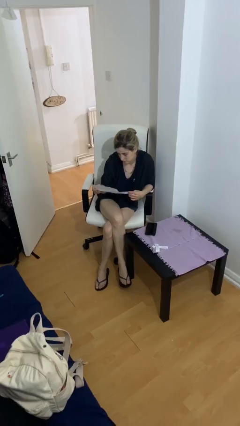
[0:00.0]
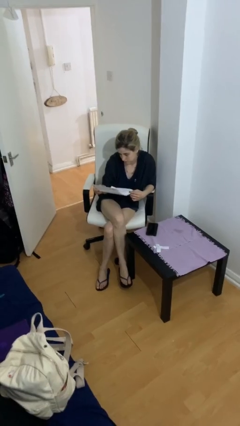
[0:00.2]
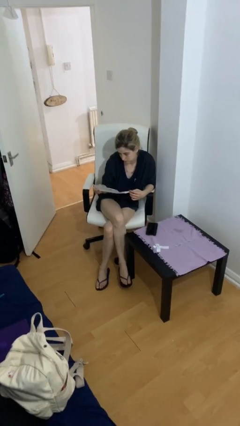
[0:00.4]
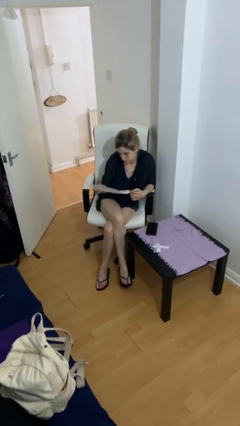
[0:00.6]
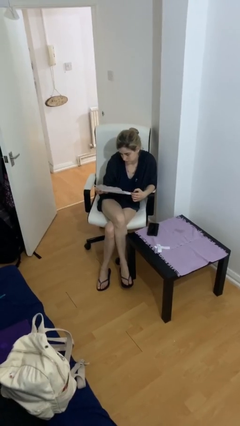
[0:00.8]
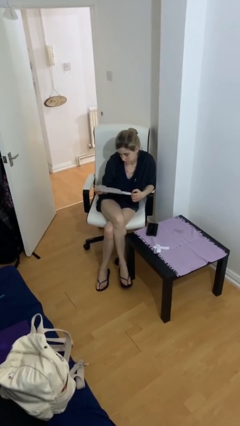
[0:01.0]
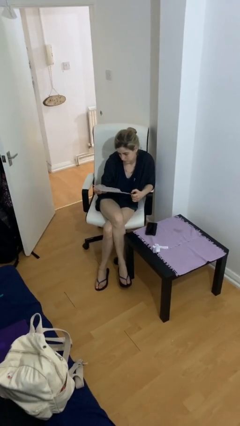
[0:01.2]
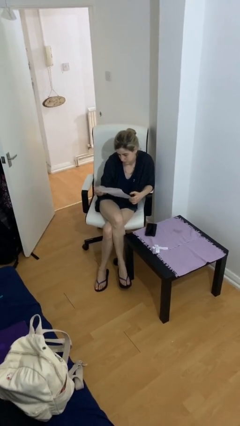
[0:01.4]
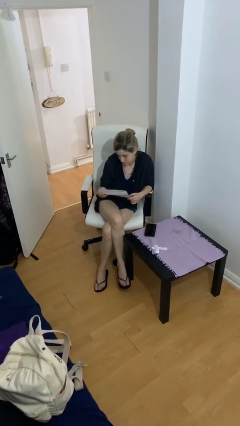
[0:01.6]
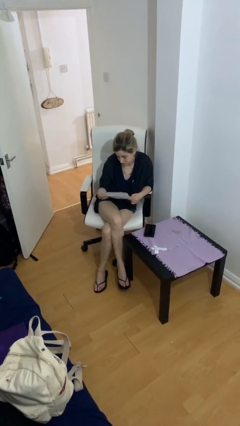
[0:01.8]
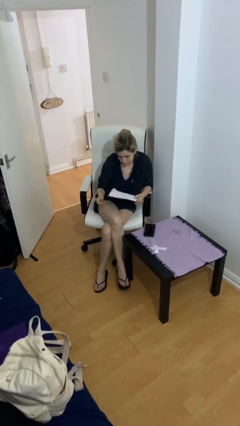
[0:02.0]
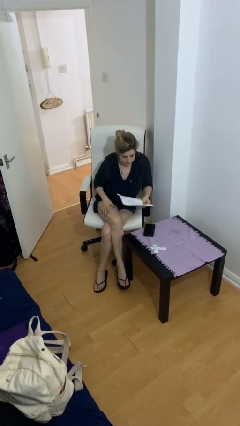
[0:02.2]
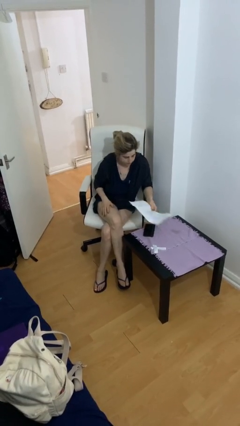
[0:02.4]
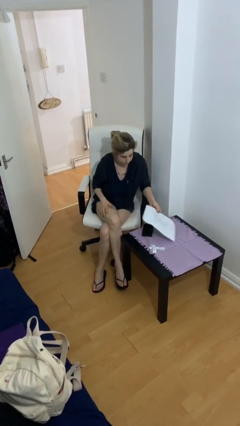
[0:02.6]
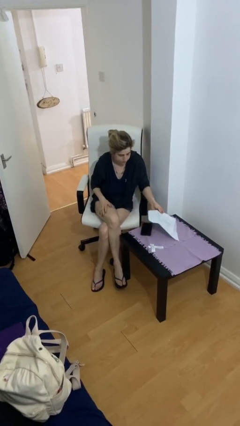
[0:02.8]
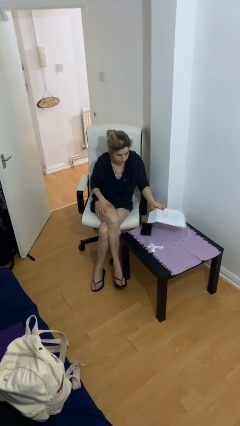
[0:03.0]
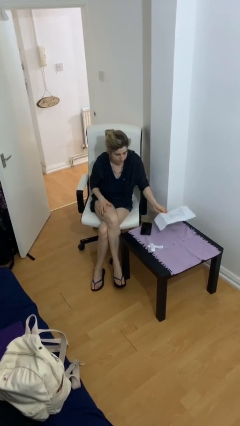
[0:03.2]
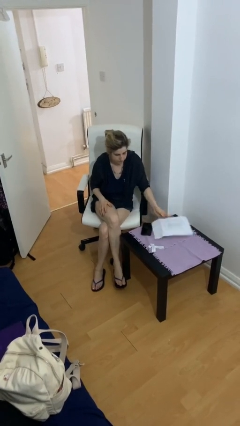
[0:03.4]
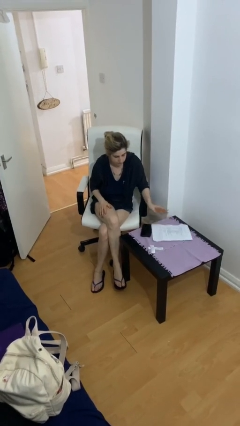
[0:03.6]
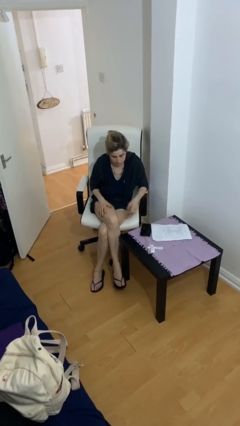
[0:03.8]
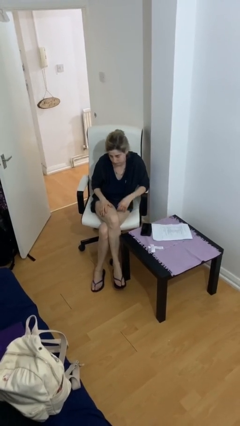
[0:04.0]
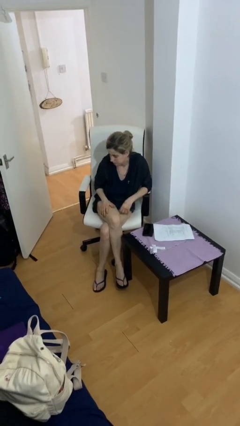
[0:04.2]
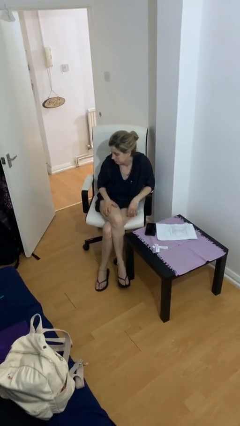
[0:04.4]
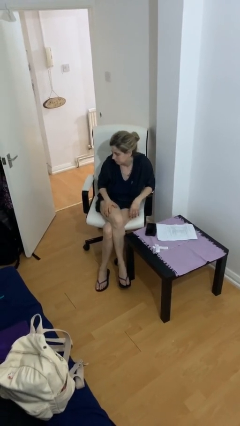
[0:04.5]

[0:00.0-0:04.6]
person puts down object on table

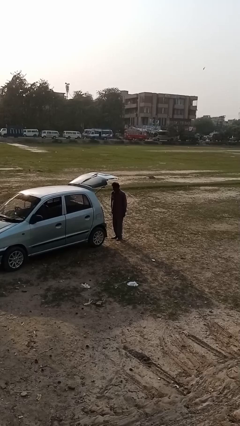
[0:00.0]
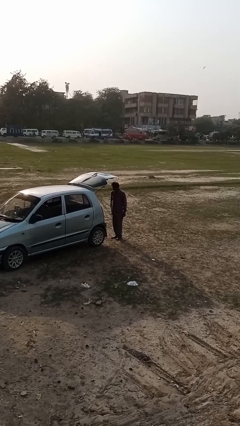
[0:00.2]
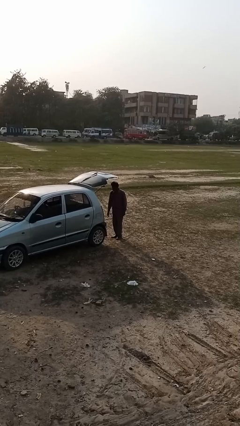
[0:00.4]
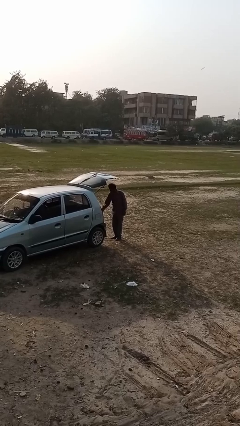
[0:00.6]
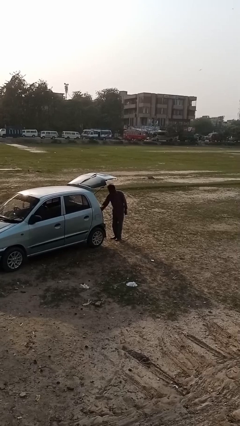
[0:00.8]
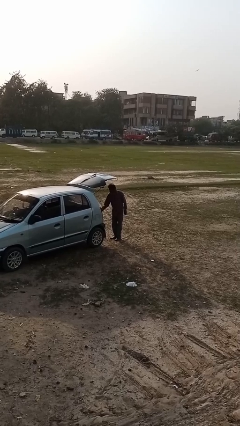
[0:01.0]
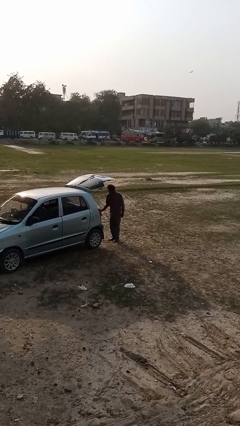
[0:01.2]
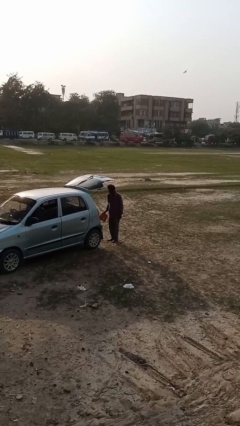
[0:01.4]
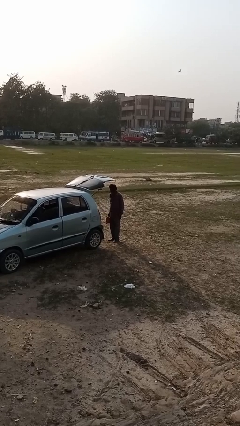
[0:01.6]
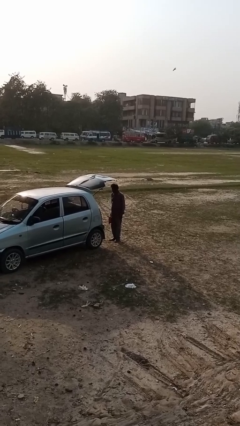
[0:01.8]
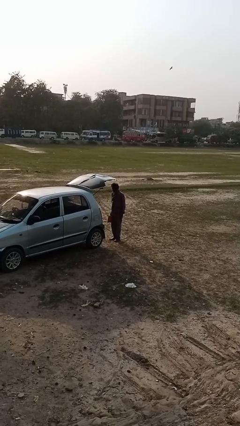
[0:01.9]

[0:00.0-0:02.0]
person unloads car

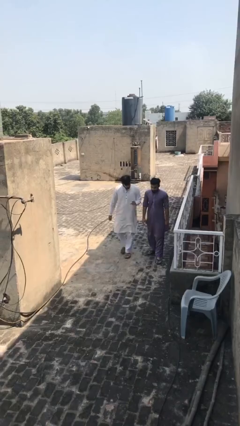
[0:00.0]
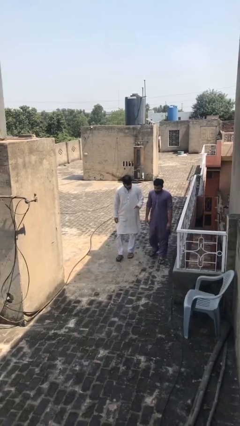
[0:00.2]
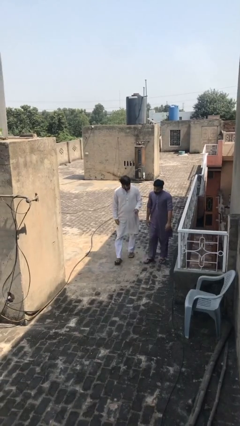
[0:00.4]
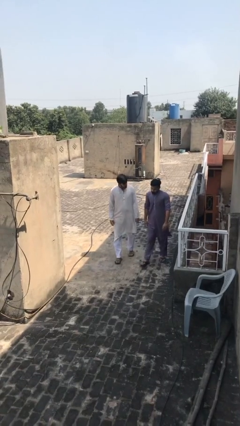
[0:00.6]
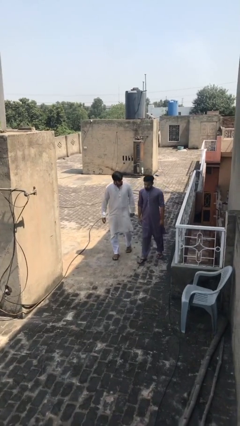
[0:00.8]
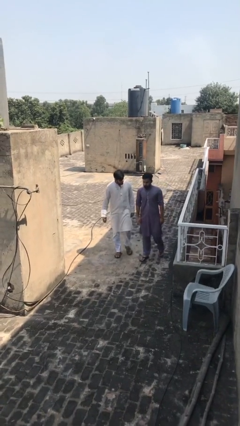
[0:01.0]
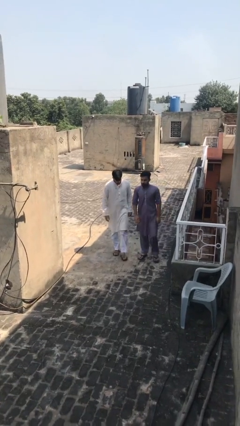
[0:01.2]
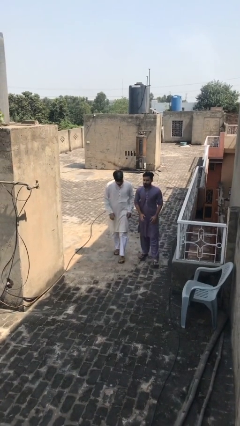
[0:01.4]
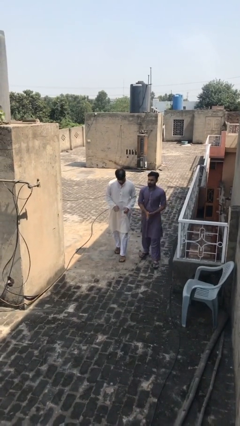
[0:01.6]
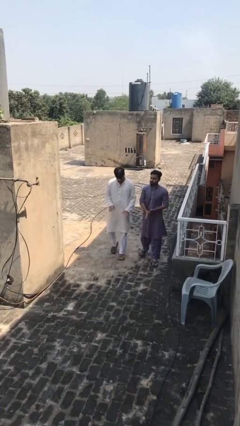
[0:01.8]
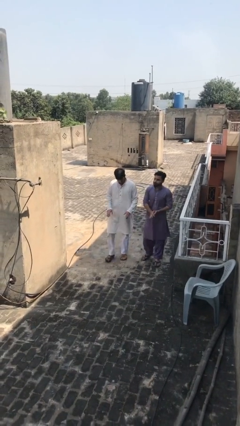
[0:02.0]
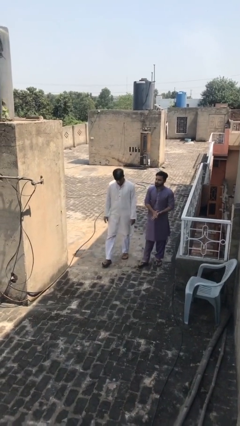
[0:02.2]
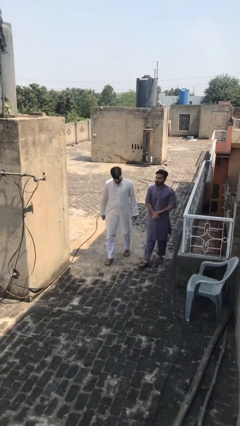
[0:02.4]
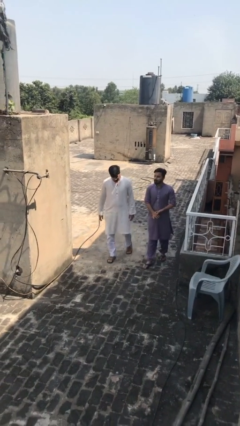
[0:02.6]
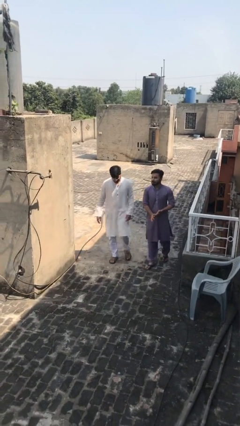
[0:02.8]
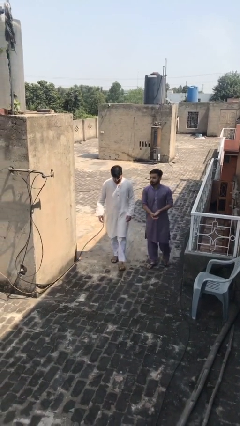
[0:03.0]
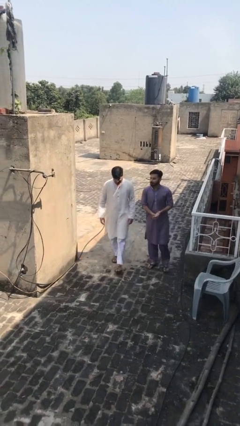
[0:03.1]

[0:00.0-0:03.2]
person talks to person

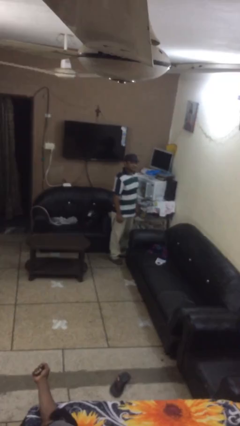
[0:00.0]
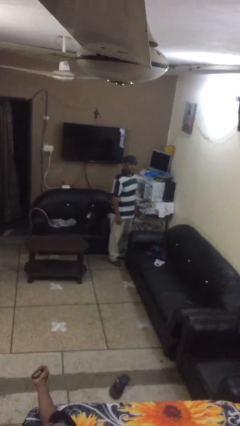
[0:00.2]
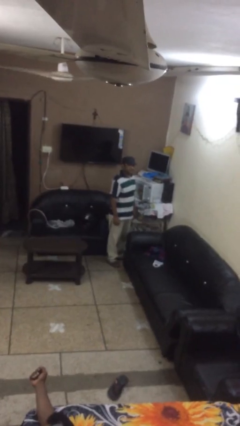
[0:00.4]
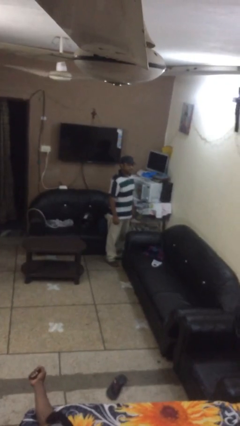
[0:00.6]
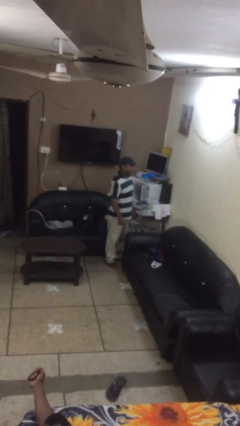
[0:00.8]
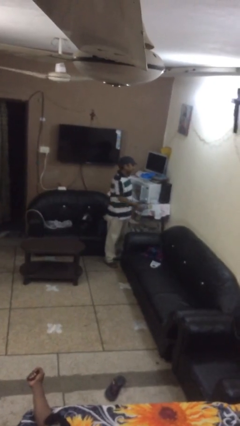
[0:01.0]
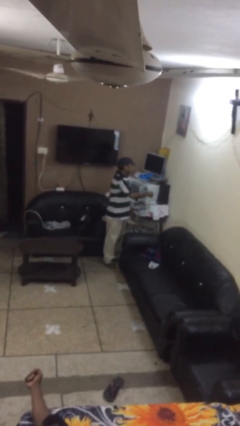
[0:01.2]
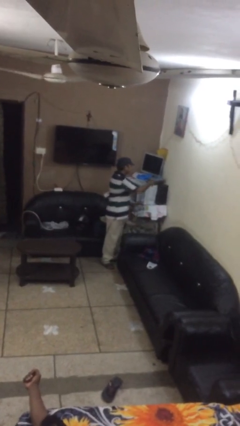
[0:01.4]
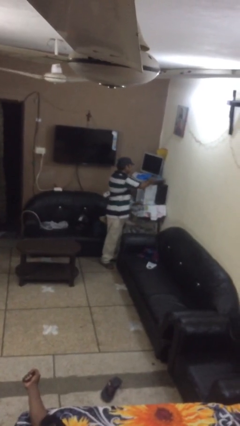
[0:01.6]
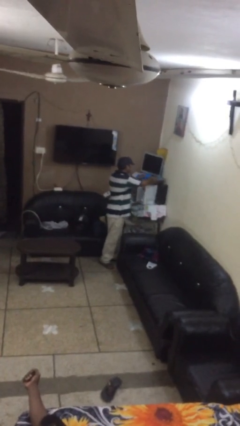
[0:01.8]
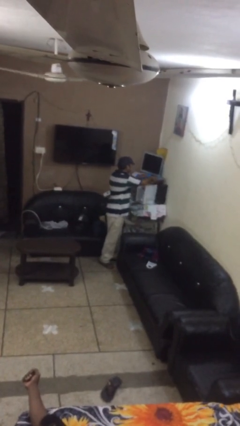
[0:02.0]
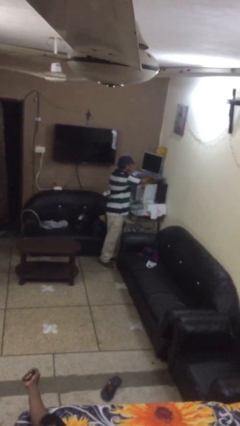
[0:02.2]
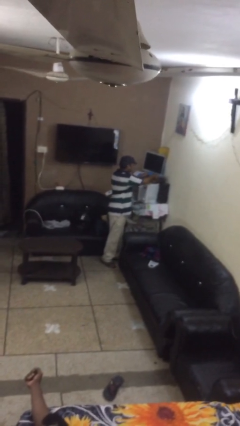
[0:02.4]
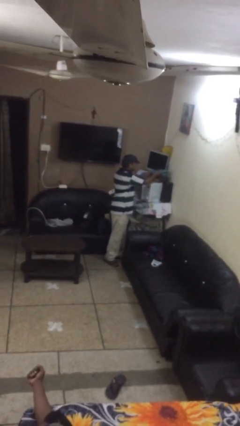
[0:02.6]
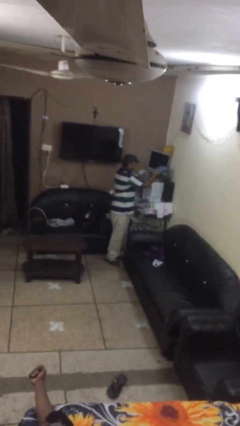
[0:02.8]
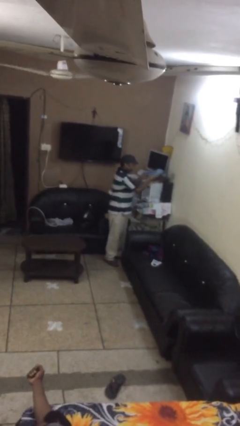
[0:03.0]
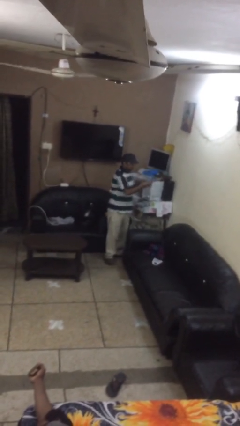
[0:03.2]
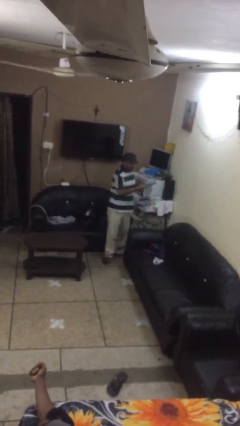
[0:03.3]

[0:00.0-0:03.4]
person picks up object from shelf

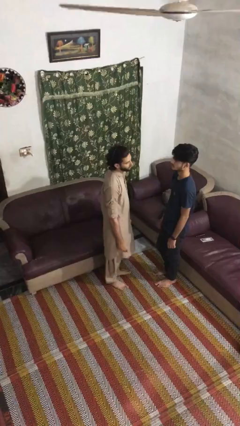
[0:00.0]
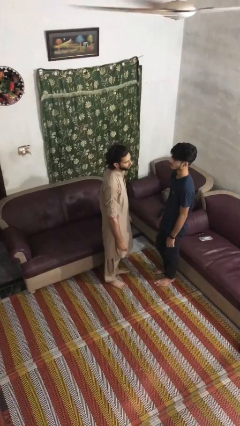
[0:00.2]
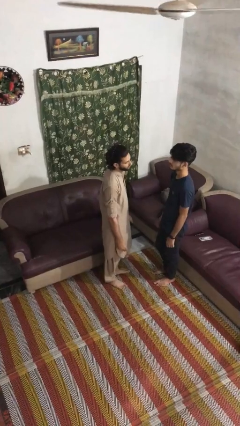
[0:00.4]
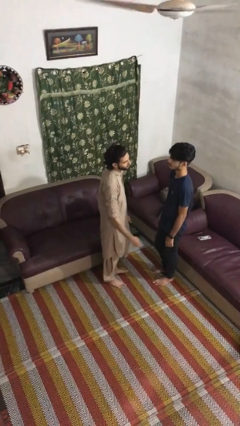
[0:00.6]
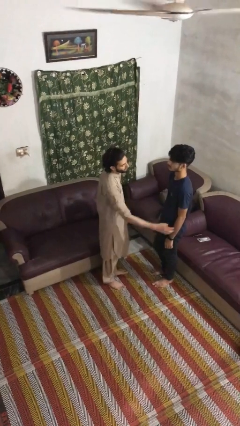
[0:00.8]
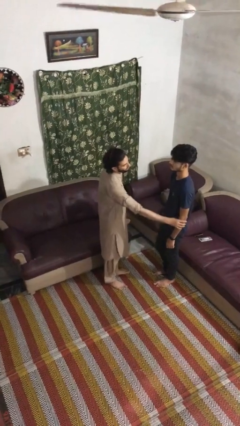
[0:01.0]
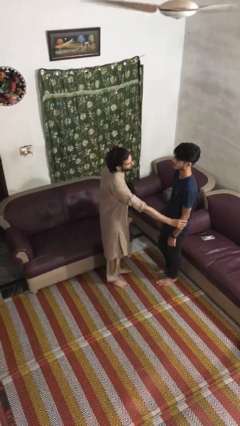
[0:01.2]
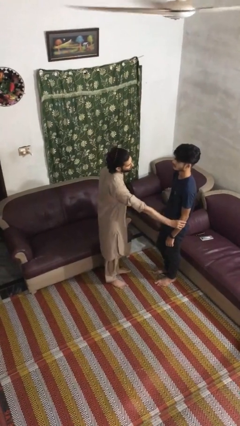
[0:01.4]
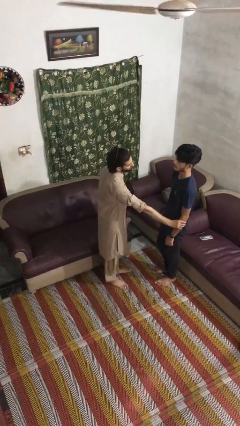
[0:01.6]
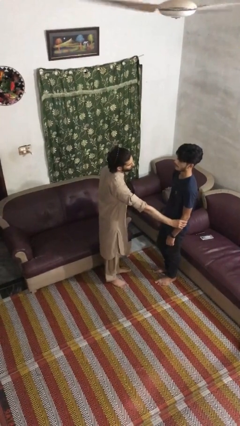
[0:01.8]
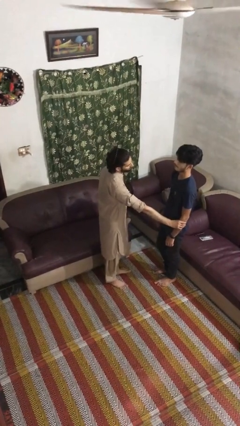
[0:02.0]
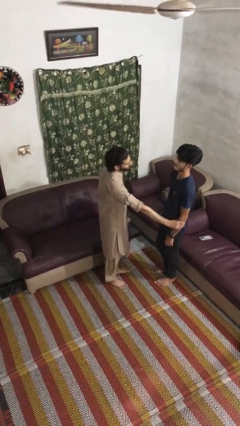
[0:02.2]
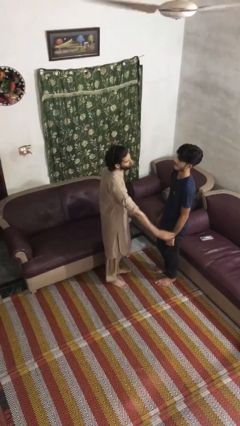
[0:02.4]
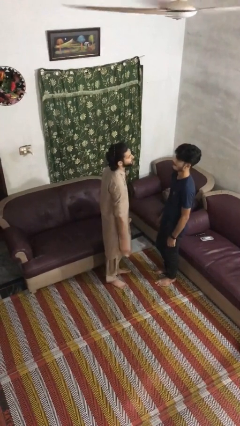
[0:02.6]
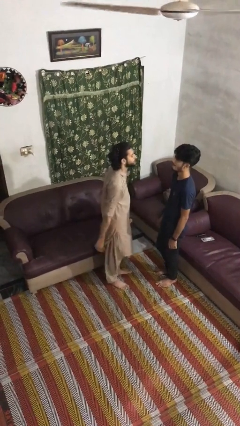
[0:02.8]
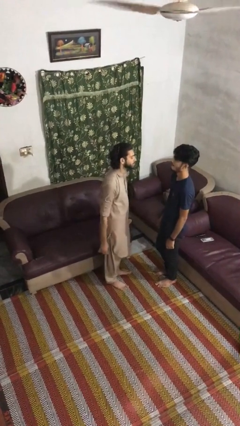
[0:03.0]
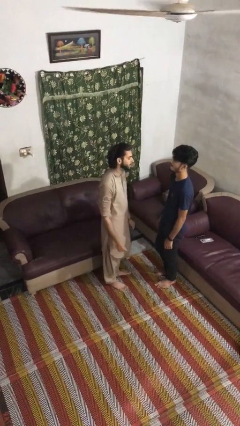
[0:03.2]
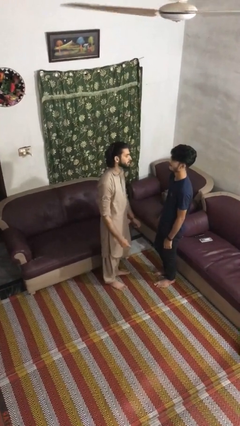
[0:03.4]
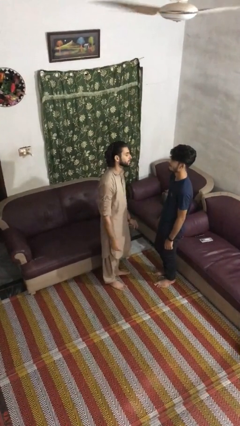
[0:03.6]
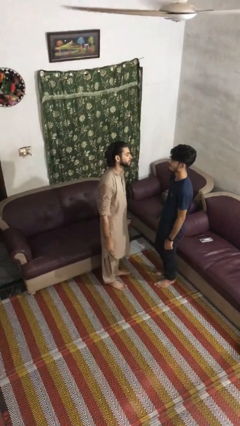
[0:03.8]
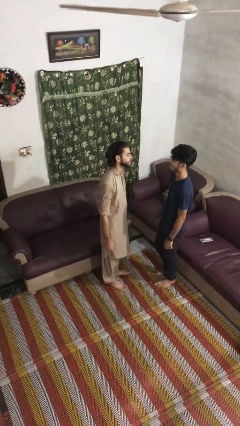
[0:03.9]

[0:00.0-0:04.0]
person grabs person by forearm

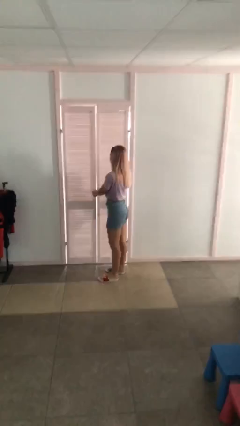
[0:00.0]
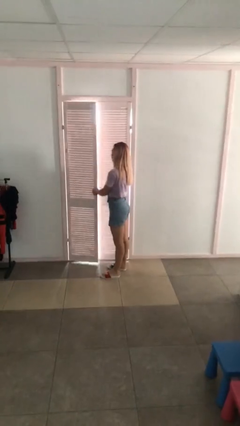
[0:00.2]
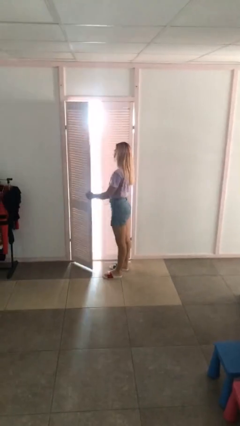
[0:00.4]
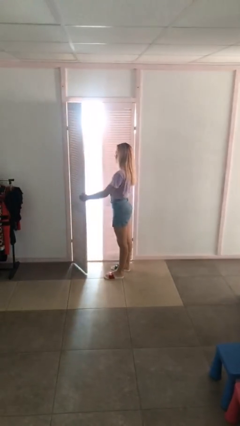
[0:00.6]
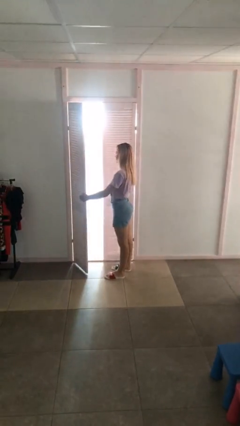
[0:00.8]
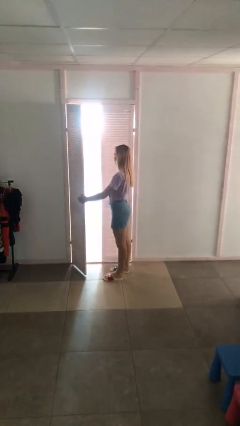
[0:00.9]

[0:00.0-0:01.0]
person opens facility door
